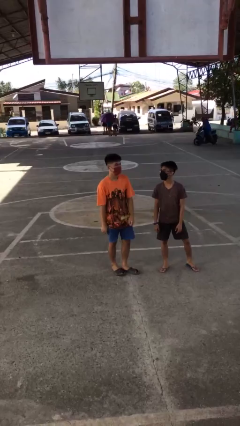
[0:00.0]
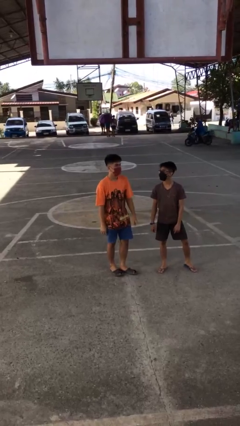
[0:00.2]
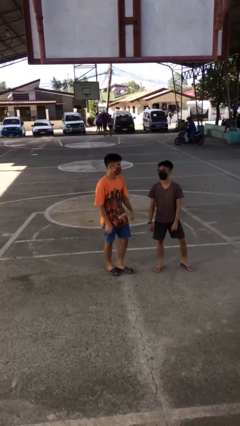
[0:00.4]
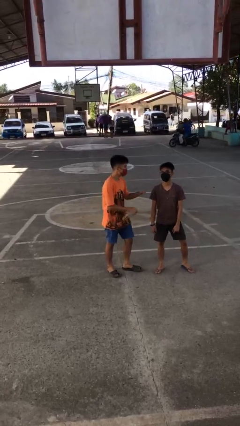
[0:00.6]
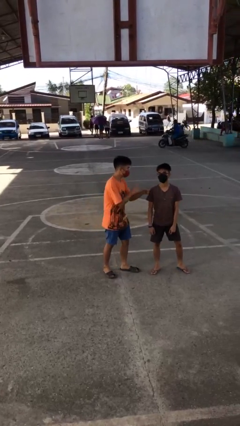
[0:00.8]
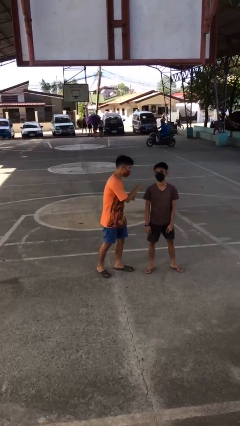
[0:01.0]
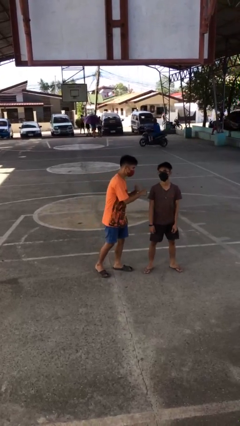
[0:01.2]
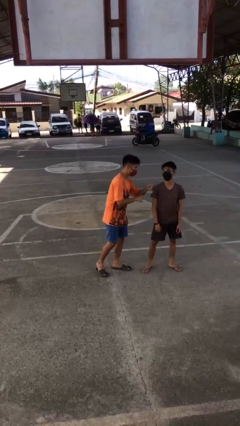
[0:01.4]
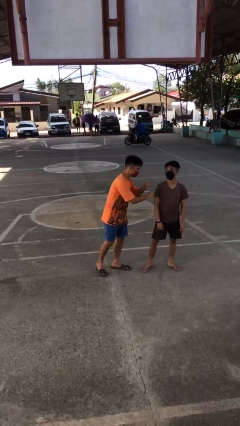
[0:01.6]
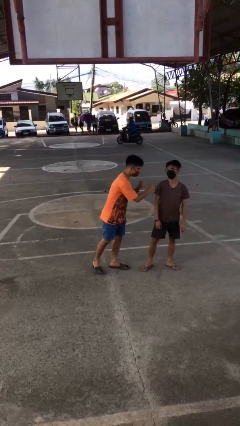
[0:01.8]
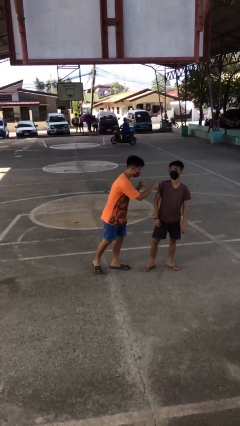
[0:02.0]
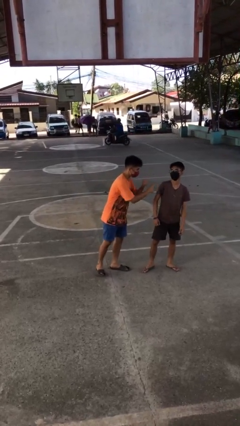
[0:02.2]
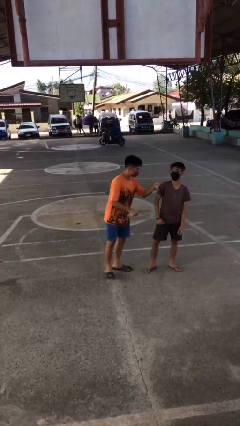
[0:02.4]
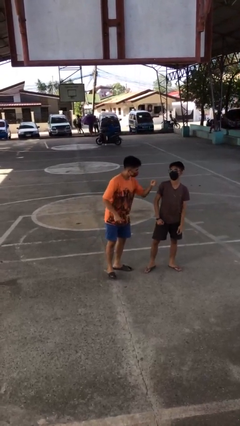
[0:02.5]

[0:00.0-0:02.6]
person pounds shoulders of person

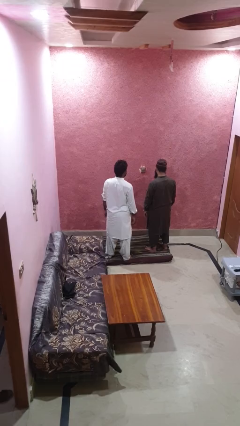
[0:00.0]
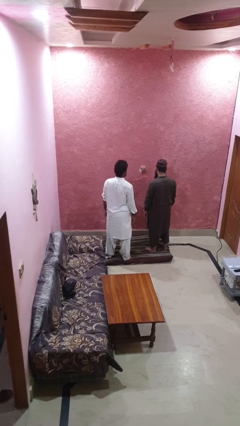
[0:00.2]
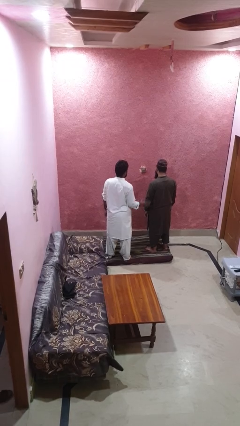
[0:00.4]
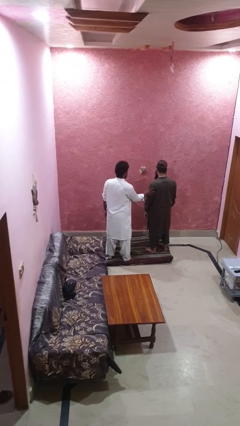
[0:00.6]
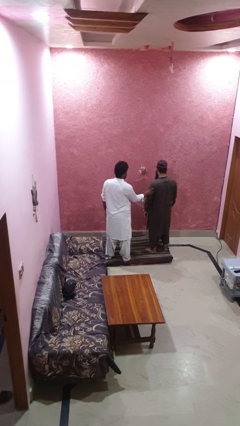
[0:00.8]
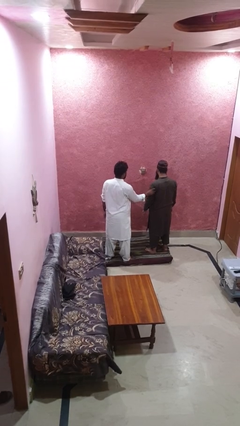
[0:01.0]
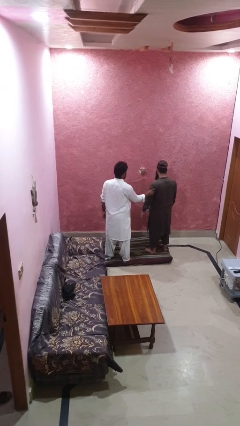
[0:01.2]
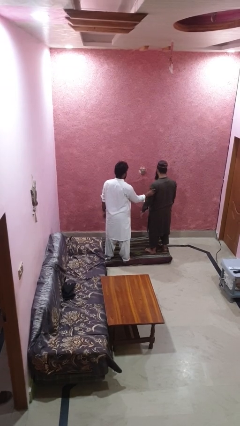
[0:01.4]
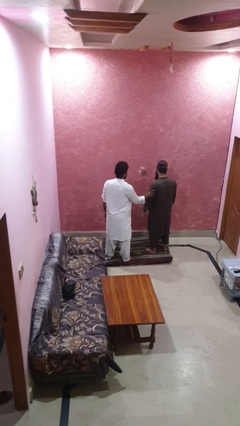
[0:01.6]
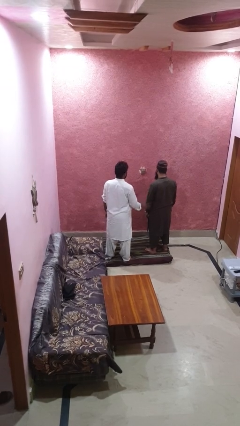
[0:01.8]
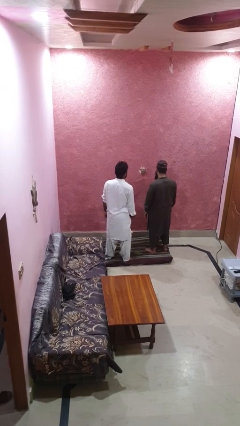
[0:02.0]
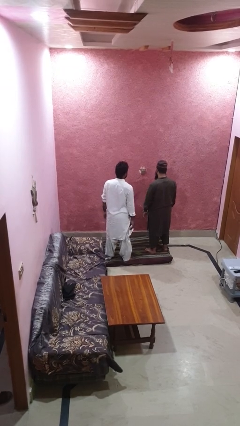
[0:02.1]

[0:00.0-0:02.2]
person grabs person by bicep

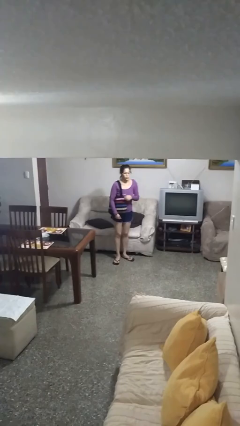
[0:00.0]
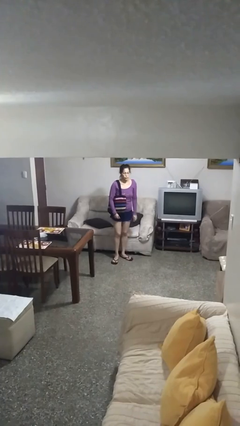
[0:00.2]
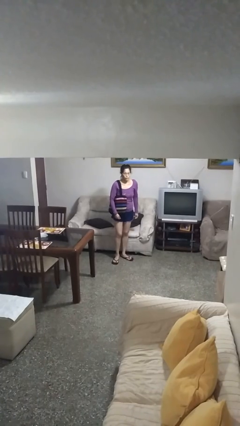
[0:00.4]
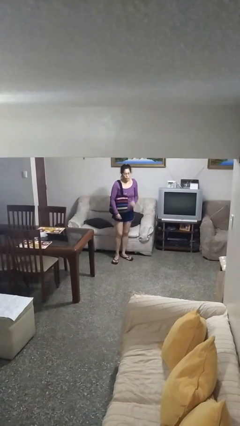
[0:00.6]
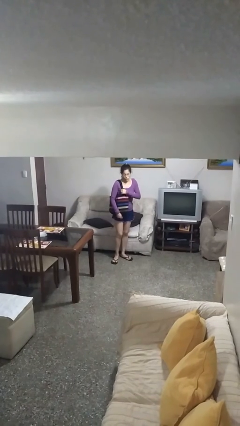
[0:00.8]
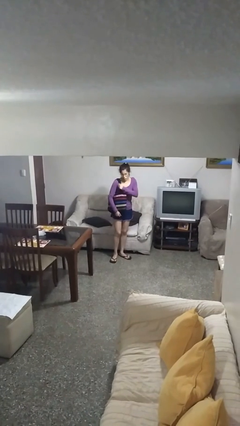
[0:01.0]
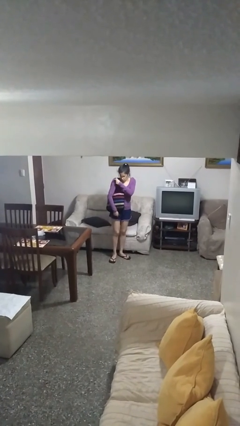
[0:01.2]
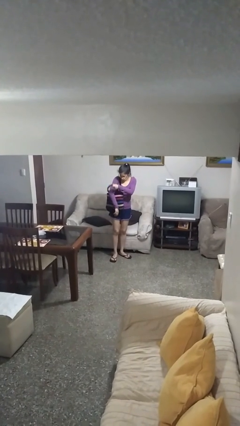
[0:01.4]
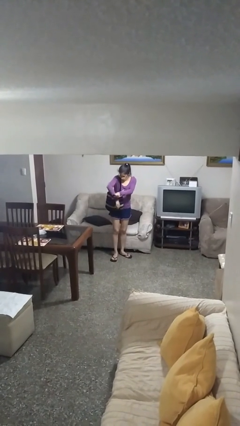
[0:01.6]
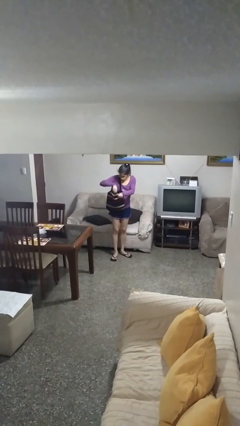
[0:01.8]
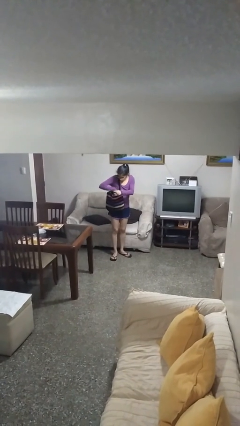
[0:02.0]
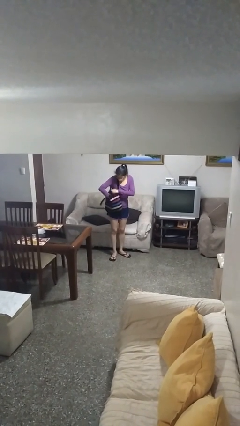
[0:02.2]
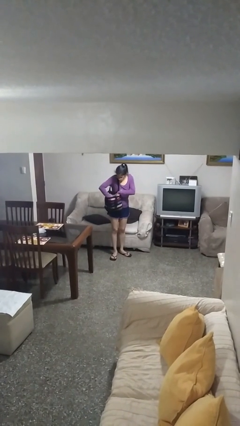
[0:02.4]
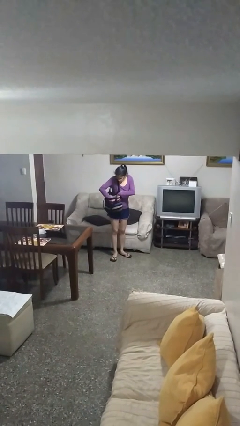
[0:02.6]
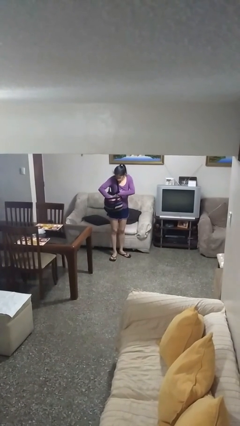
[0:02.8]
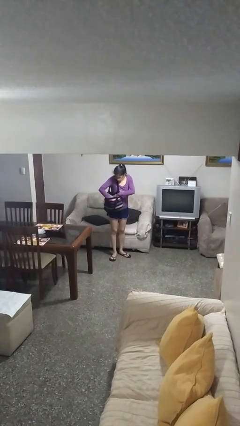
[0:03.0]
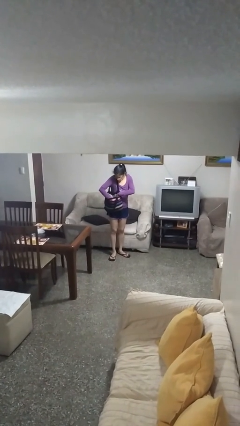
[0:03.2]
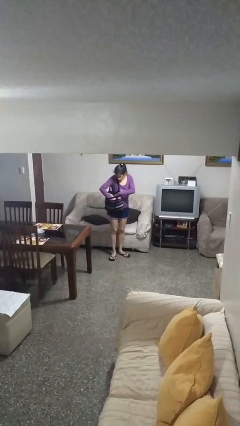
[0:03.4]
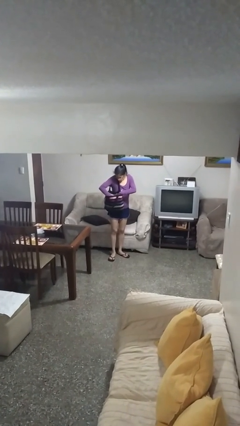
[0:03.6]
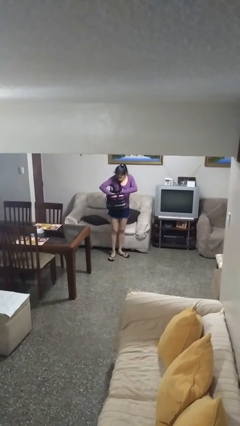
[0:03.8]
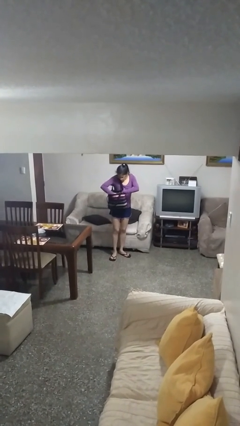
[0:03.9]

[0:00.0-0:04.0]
person searches in purse

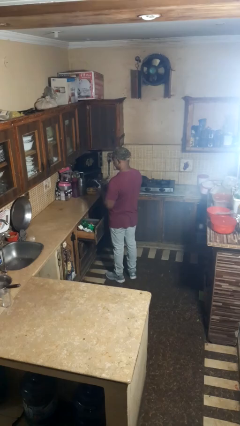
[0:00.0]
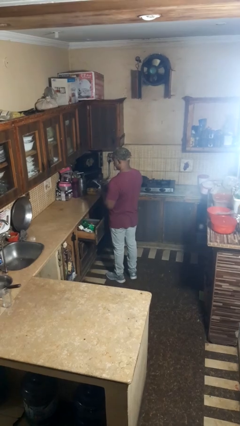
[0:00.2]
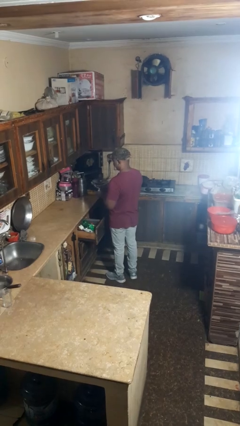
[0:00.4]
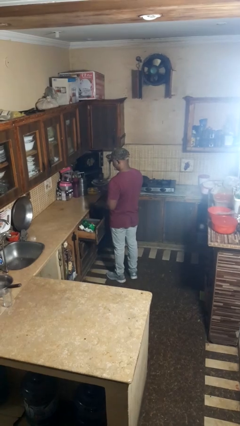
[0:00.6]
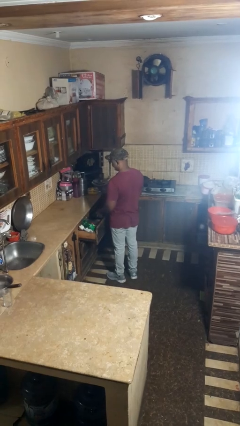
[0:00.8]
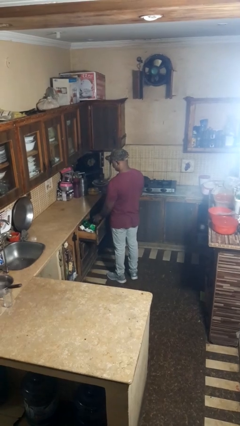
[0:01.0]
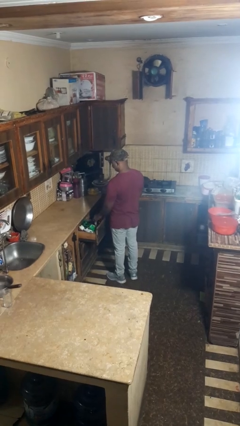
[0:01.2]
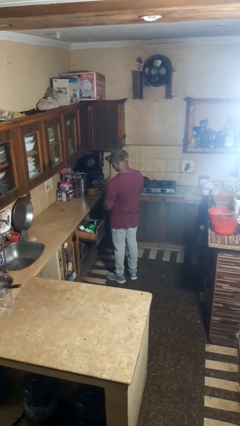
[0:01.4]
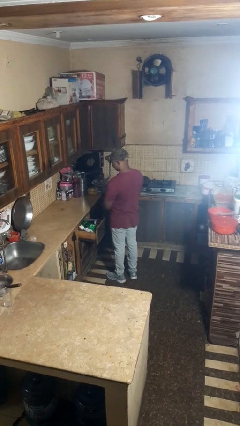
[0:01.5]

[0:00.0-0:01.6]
person puts object into kitchen drawer

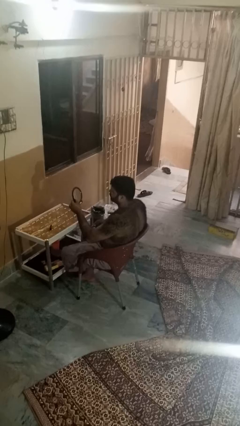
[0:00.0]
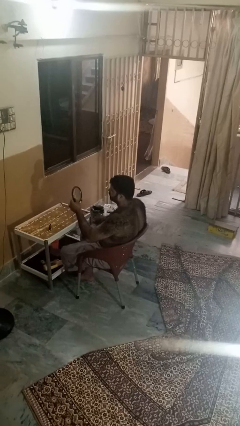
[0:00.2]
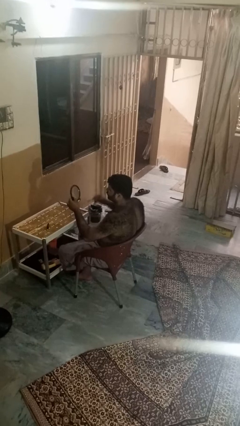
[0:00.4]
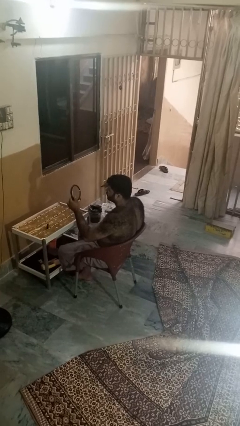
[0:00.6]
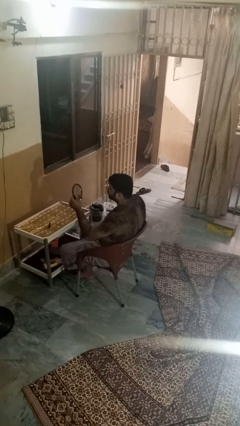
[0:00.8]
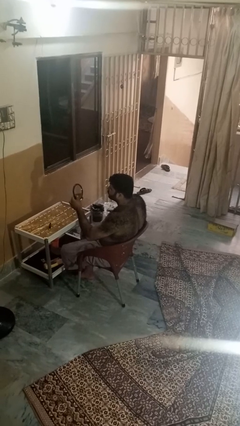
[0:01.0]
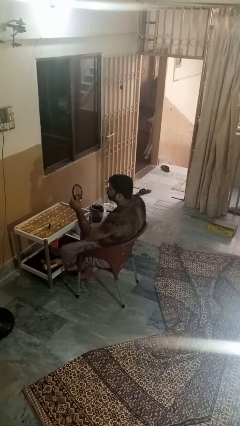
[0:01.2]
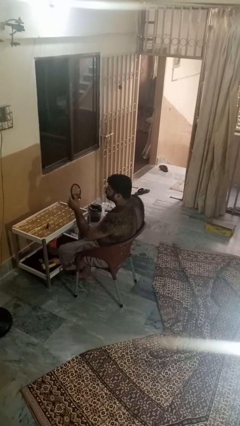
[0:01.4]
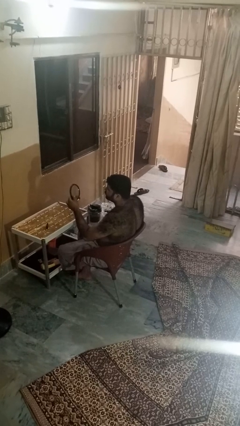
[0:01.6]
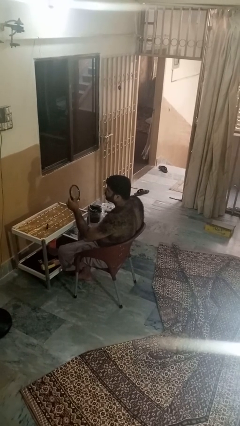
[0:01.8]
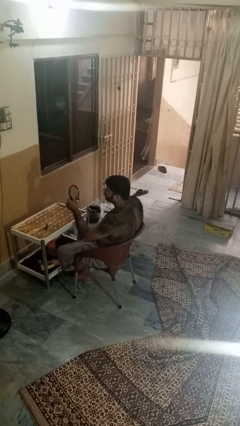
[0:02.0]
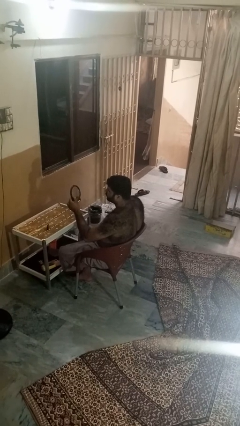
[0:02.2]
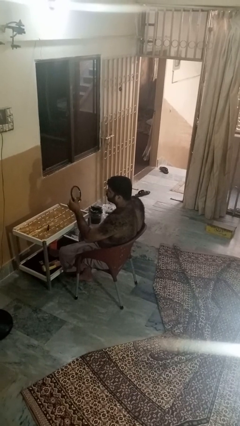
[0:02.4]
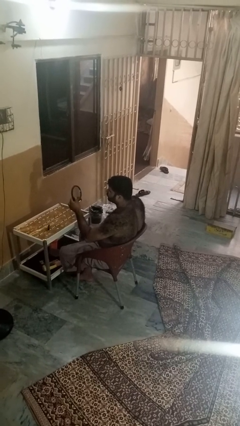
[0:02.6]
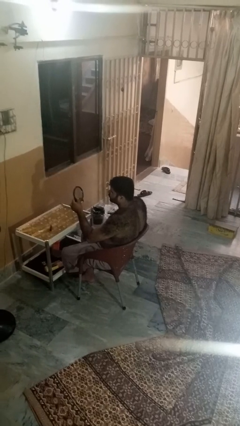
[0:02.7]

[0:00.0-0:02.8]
person applies eye makeup

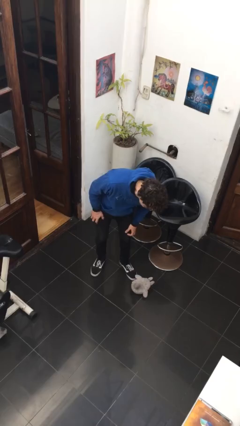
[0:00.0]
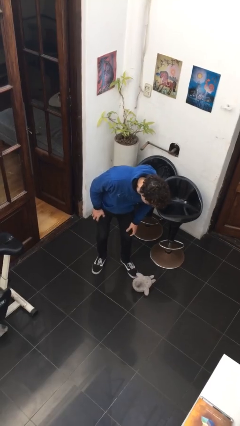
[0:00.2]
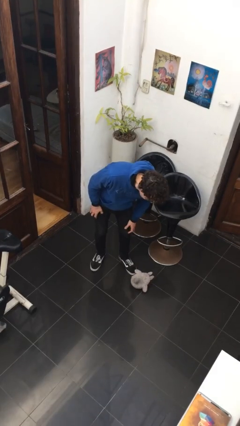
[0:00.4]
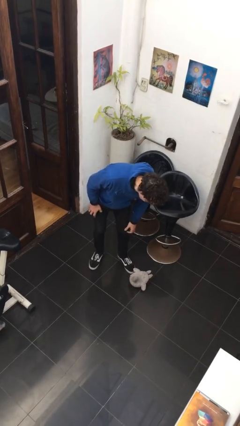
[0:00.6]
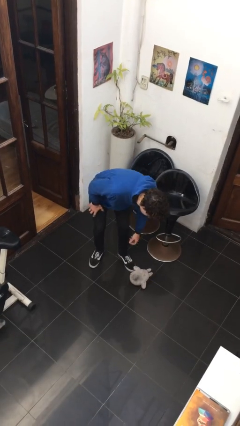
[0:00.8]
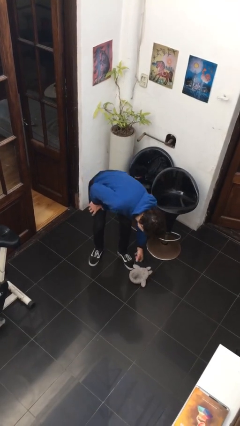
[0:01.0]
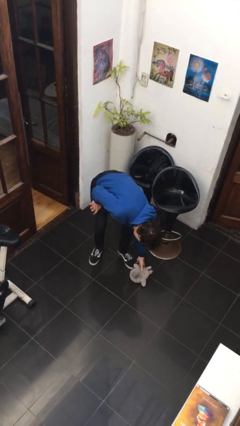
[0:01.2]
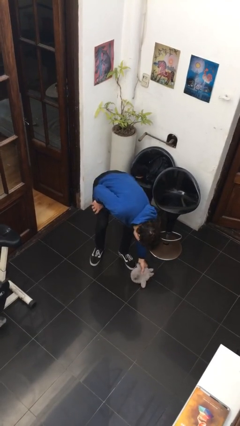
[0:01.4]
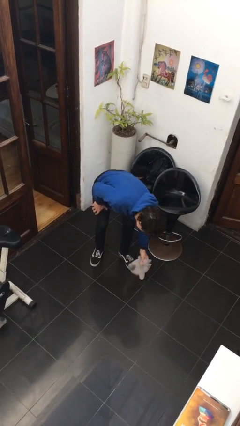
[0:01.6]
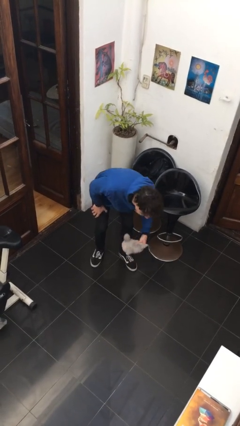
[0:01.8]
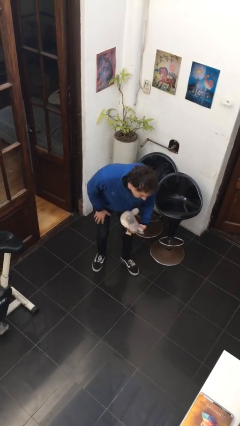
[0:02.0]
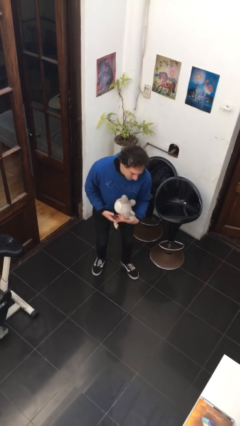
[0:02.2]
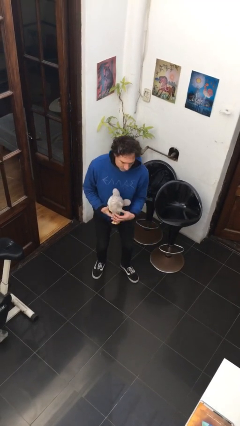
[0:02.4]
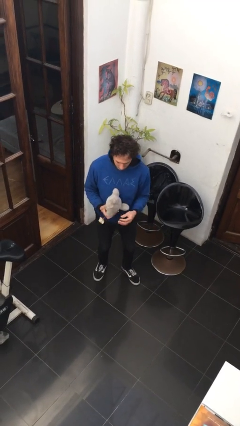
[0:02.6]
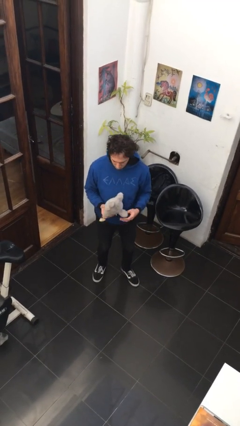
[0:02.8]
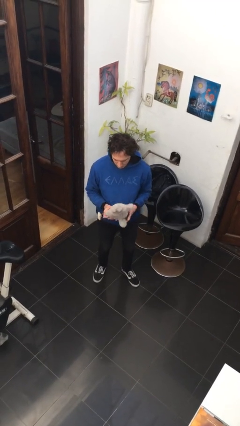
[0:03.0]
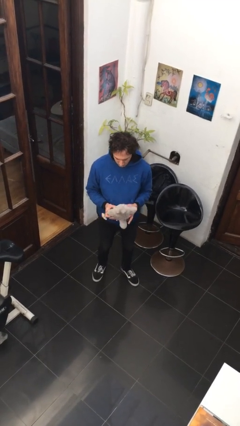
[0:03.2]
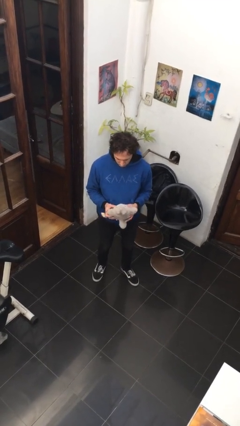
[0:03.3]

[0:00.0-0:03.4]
person picks up object from floor

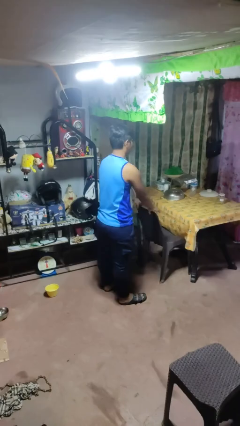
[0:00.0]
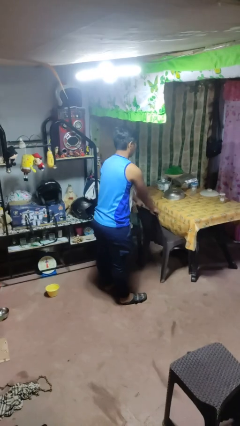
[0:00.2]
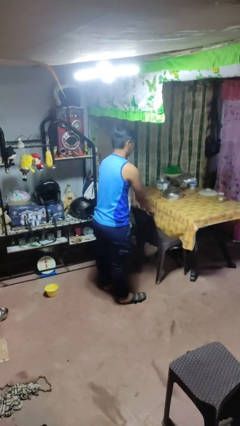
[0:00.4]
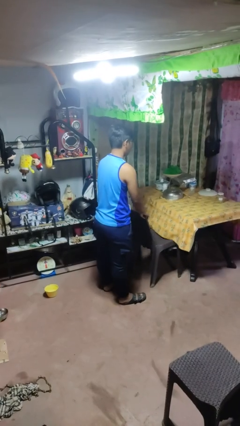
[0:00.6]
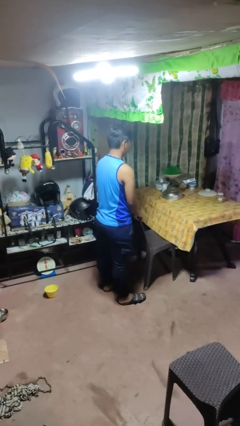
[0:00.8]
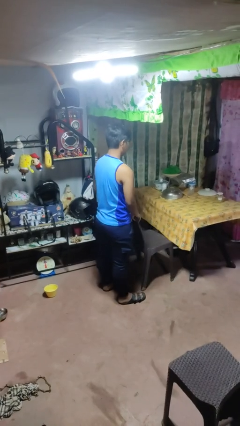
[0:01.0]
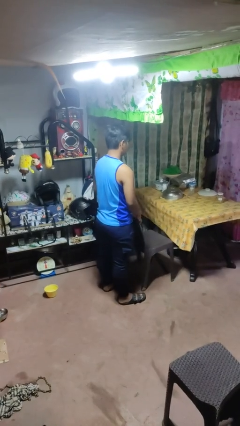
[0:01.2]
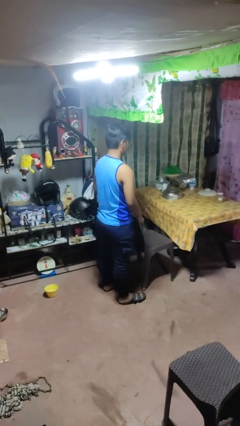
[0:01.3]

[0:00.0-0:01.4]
person pulls out chair
